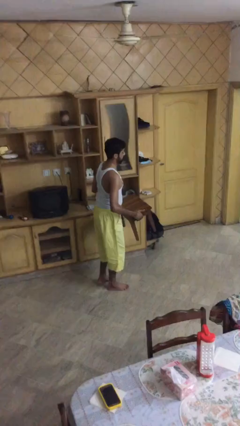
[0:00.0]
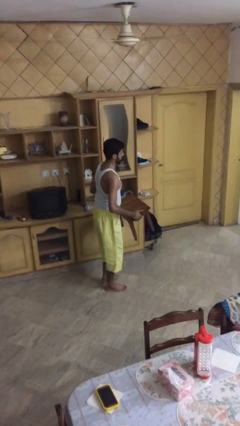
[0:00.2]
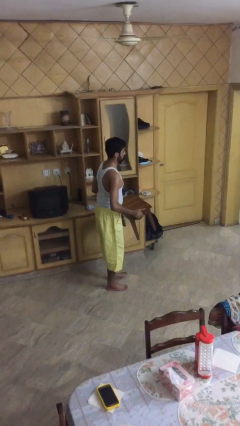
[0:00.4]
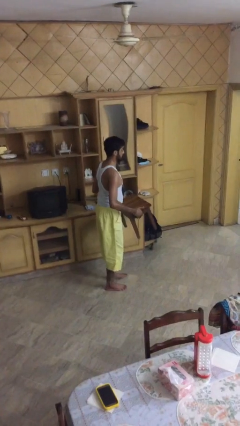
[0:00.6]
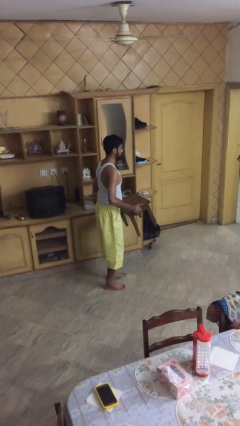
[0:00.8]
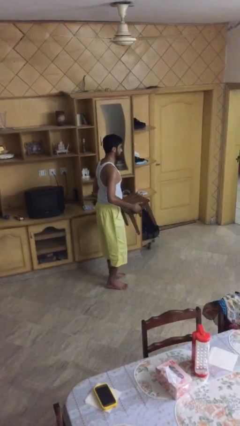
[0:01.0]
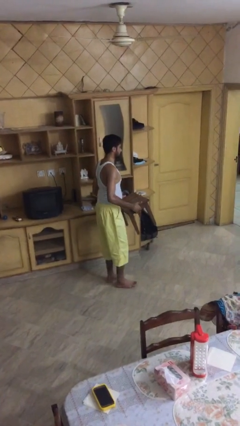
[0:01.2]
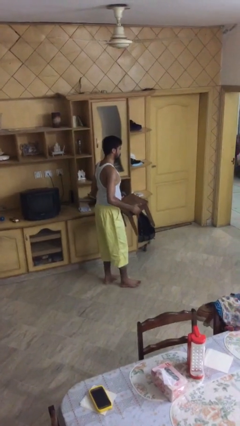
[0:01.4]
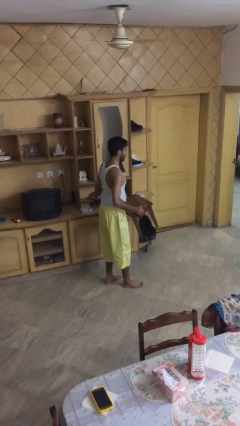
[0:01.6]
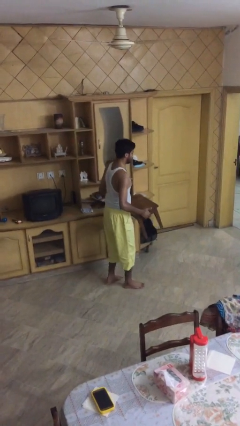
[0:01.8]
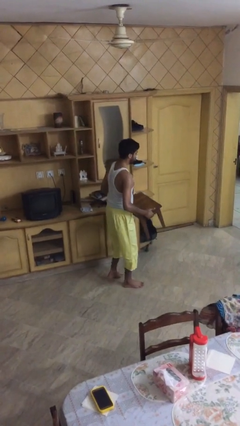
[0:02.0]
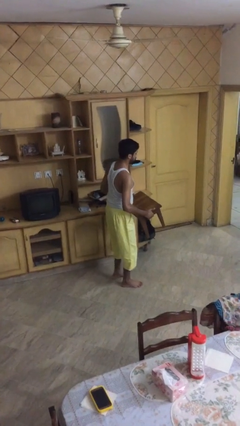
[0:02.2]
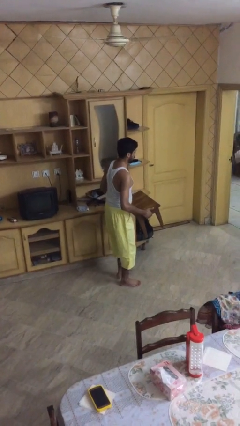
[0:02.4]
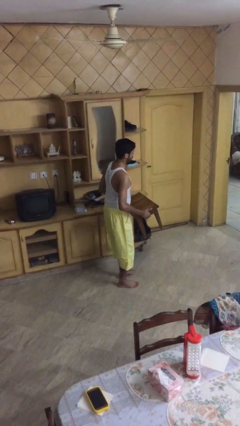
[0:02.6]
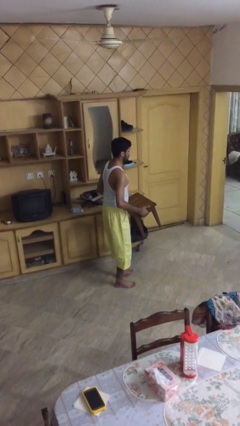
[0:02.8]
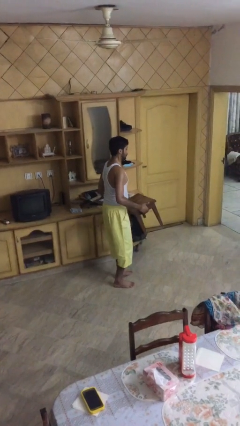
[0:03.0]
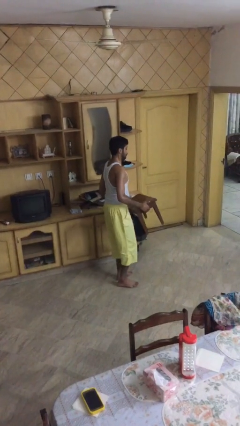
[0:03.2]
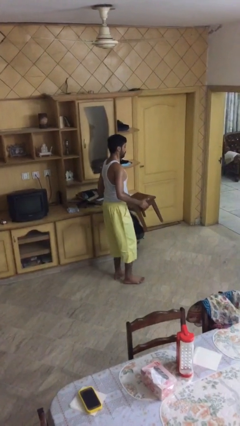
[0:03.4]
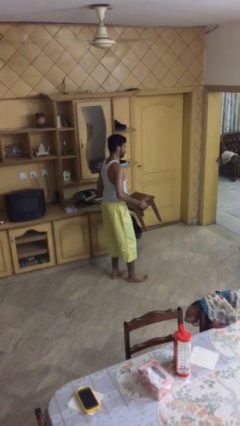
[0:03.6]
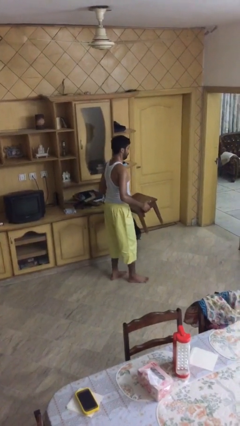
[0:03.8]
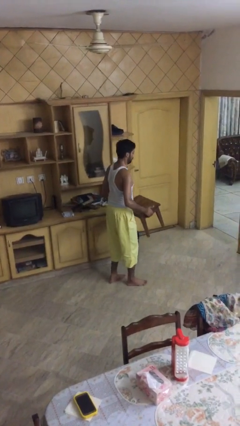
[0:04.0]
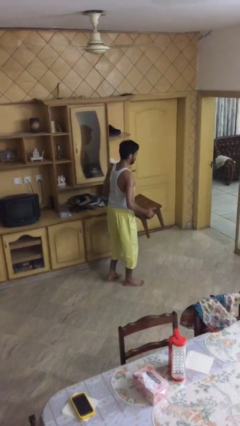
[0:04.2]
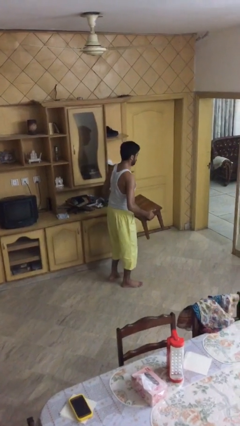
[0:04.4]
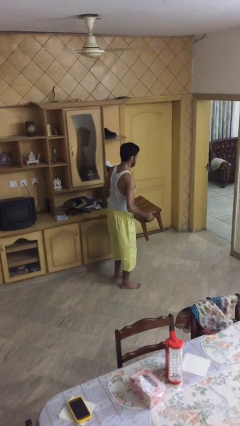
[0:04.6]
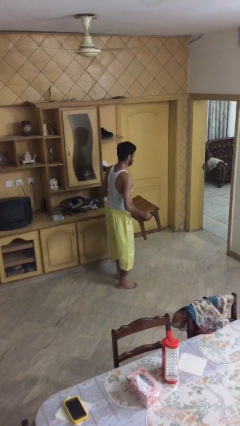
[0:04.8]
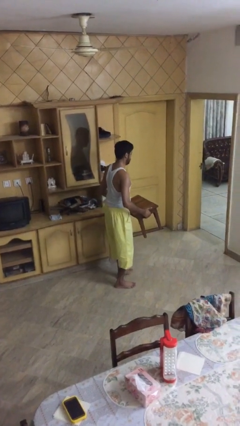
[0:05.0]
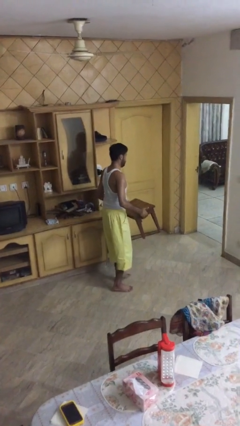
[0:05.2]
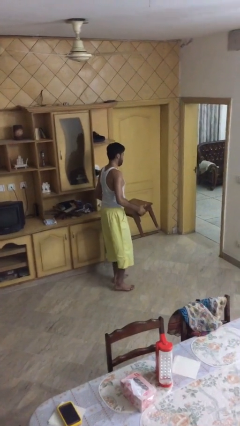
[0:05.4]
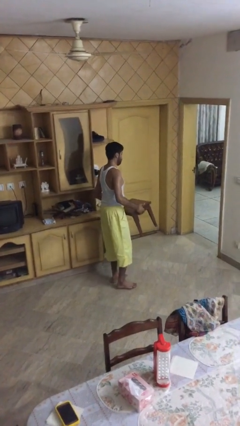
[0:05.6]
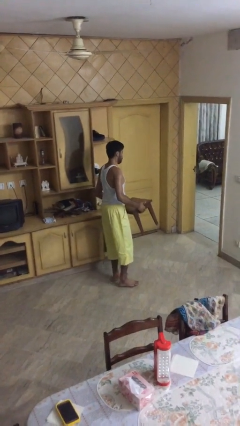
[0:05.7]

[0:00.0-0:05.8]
person carries heavy object

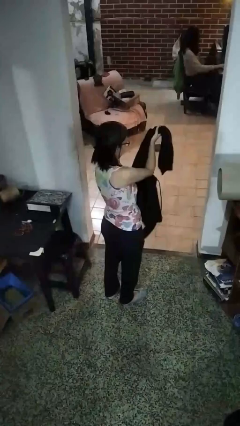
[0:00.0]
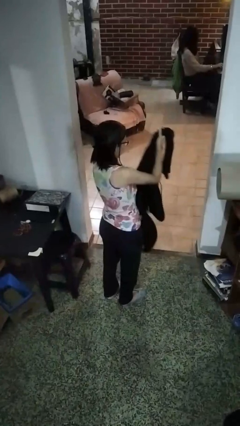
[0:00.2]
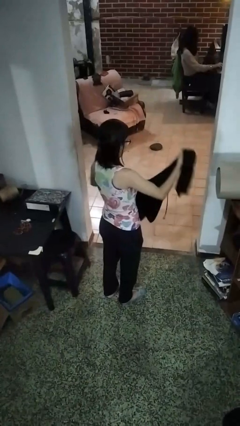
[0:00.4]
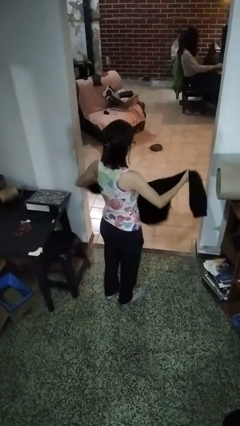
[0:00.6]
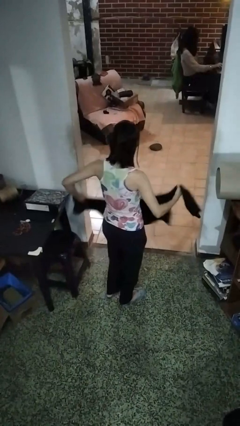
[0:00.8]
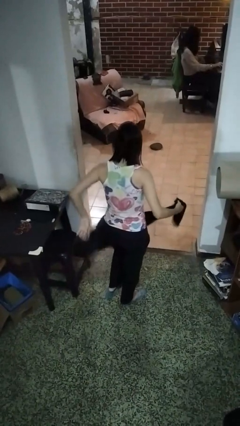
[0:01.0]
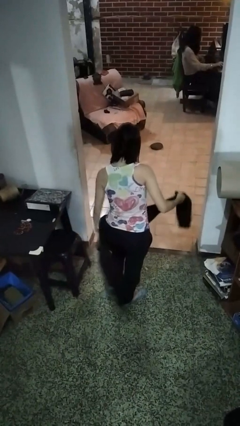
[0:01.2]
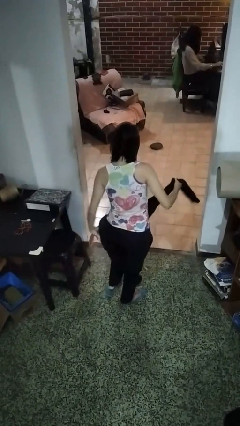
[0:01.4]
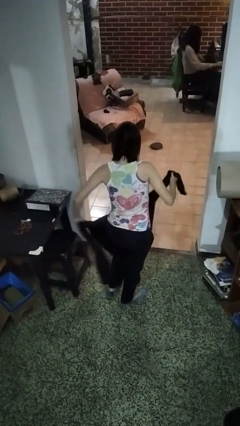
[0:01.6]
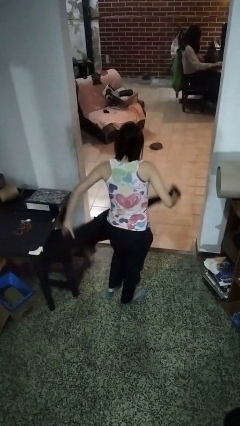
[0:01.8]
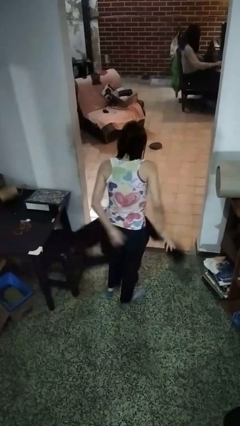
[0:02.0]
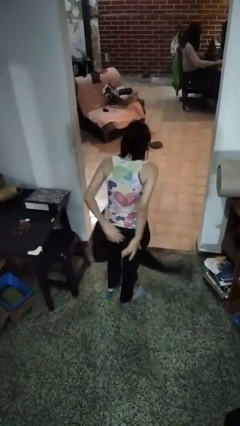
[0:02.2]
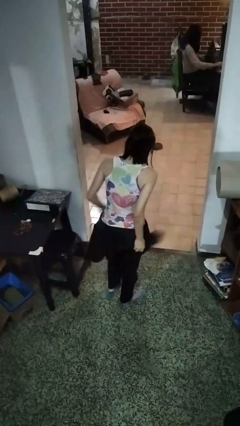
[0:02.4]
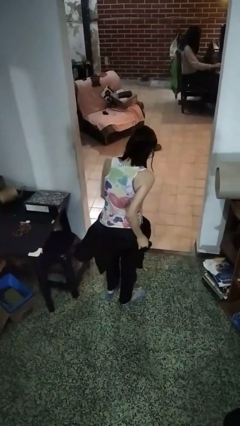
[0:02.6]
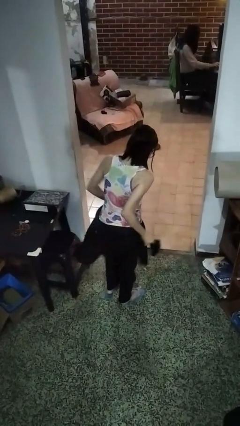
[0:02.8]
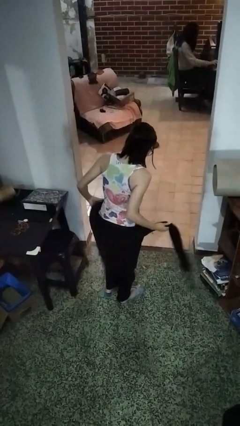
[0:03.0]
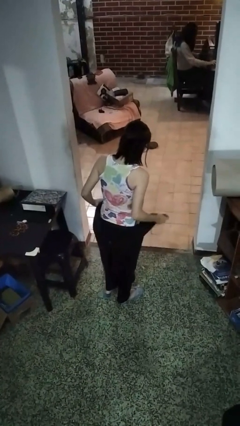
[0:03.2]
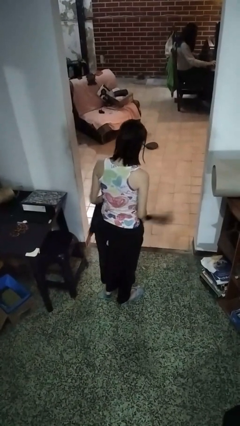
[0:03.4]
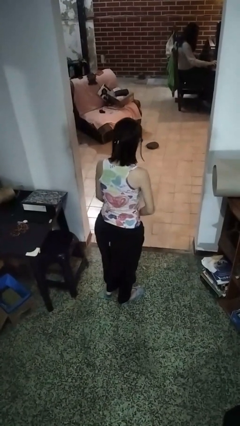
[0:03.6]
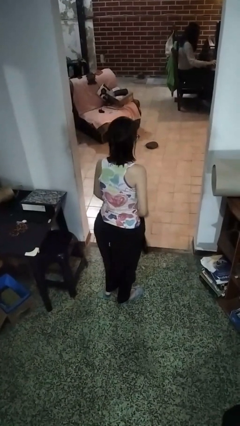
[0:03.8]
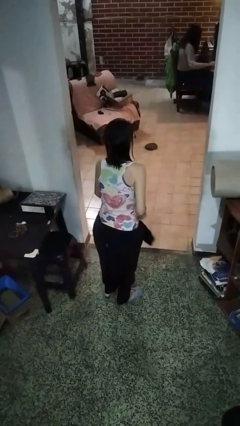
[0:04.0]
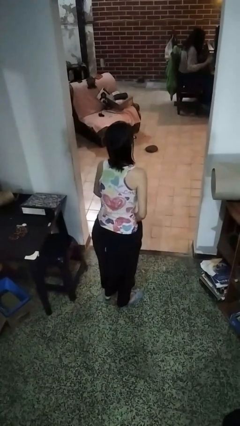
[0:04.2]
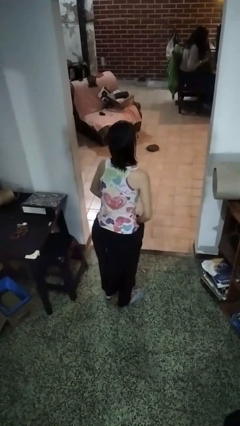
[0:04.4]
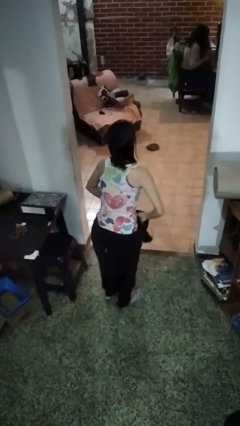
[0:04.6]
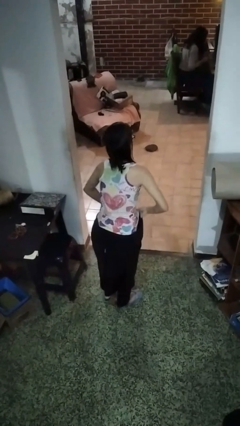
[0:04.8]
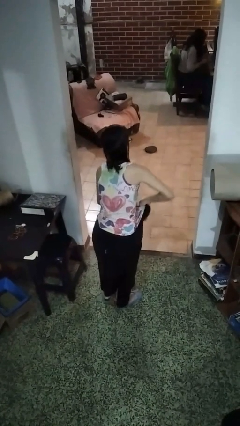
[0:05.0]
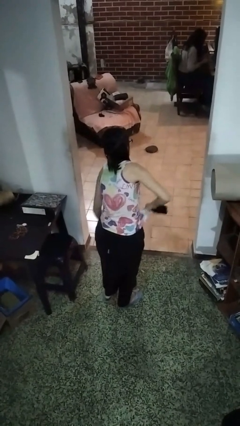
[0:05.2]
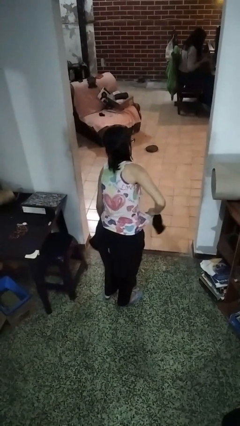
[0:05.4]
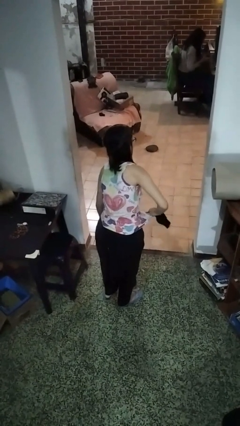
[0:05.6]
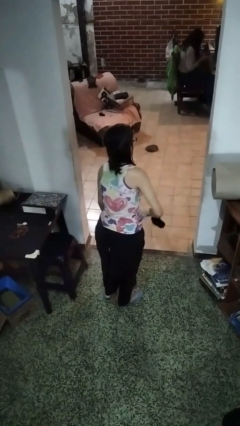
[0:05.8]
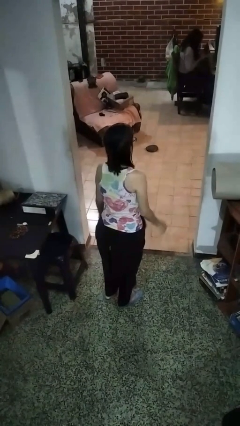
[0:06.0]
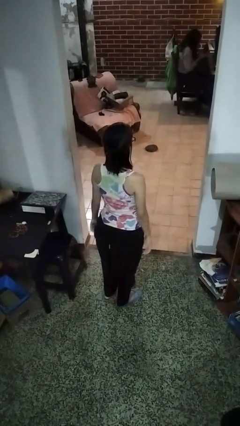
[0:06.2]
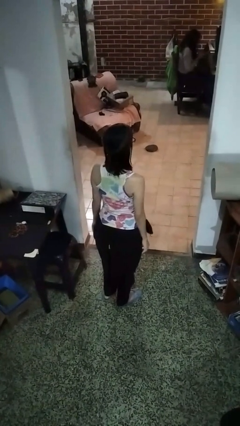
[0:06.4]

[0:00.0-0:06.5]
person ties jacket around waist

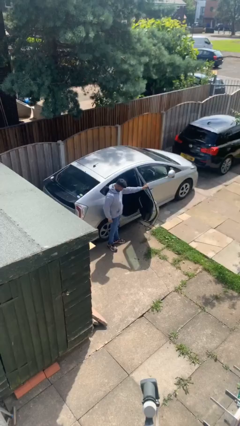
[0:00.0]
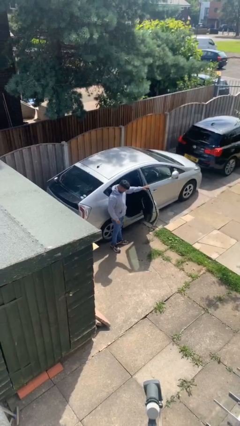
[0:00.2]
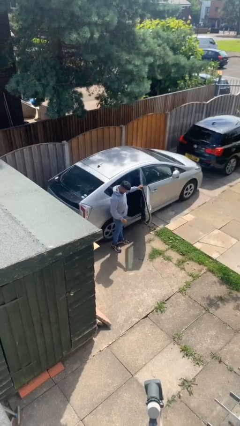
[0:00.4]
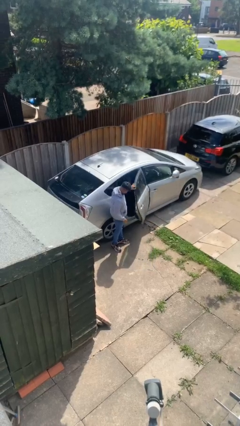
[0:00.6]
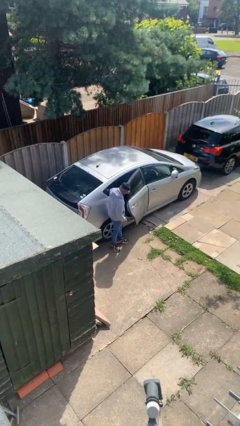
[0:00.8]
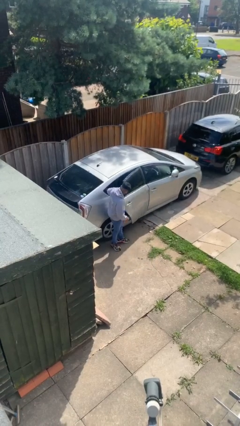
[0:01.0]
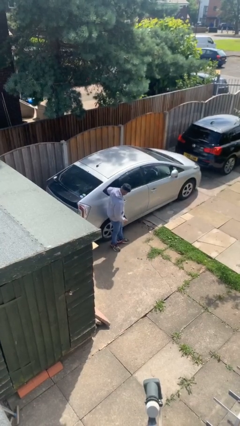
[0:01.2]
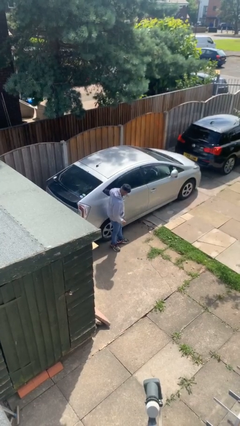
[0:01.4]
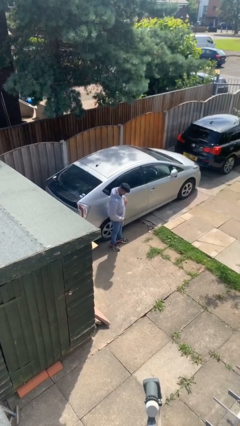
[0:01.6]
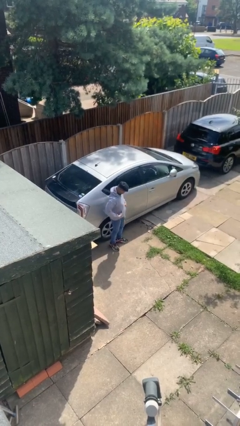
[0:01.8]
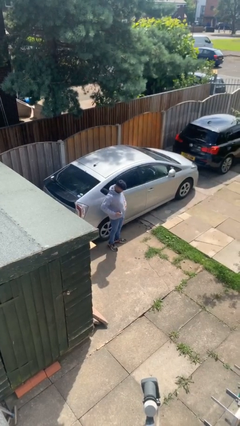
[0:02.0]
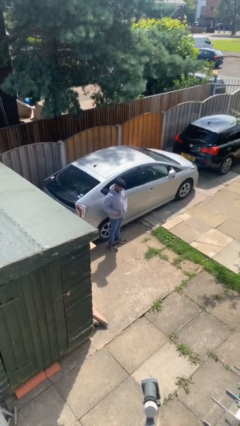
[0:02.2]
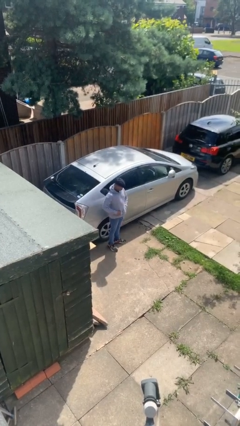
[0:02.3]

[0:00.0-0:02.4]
person closes car door

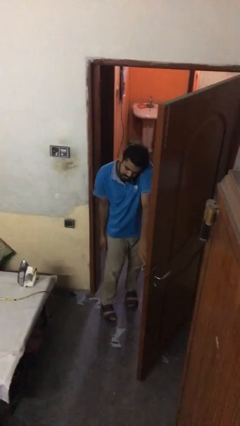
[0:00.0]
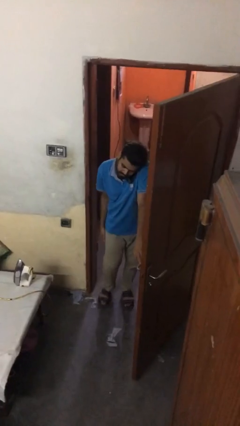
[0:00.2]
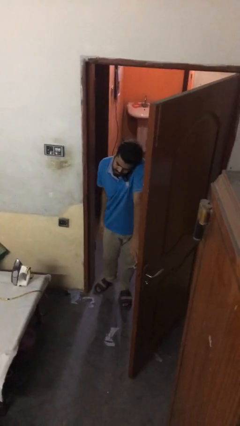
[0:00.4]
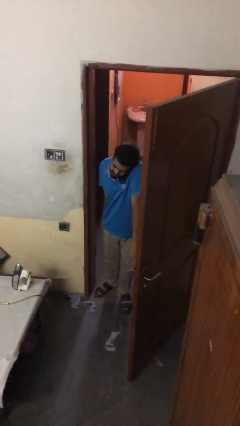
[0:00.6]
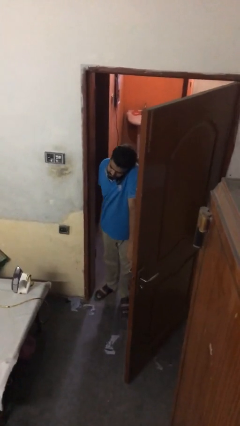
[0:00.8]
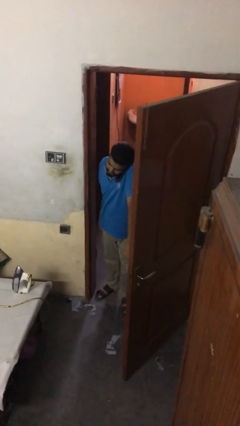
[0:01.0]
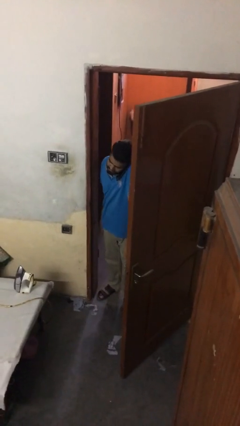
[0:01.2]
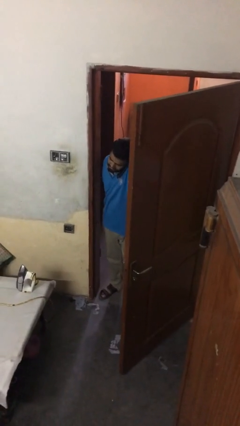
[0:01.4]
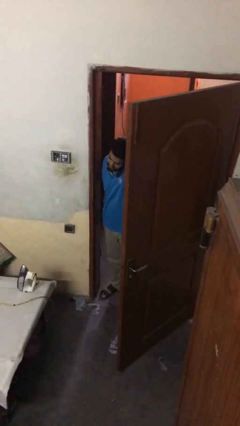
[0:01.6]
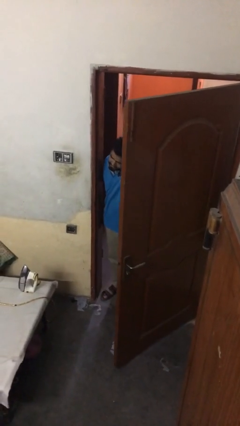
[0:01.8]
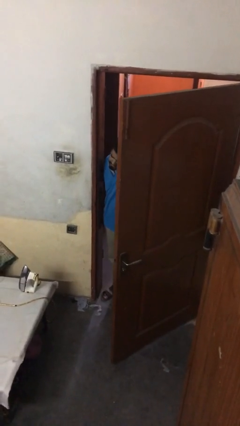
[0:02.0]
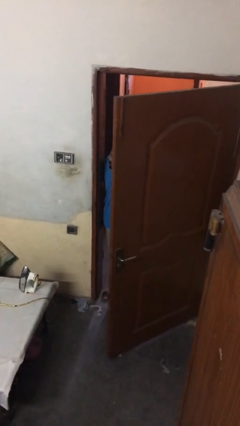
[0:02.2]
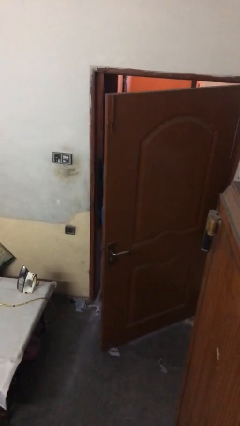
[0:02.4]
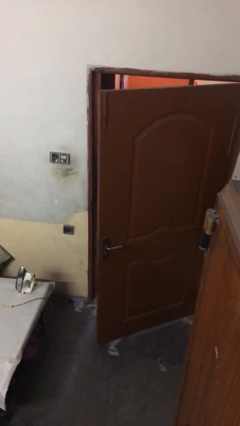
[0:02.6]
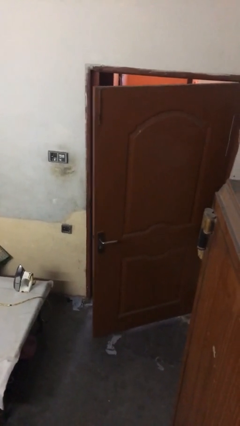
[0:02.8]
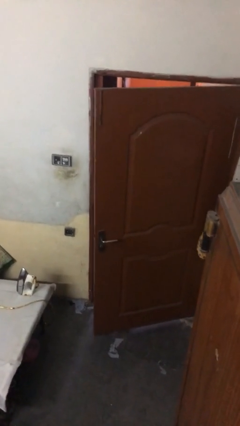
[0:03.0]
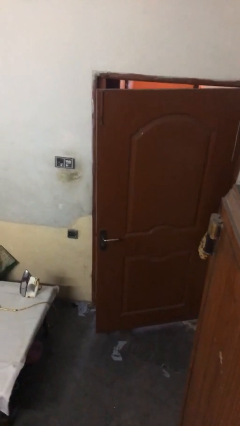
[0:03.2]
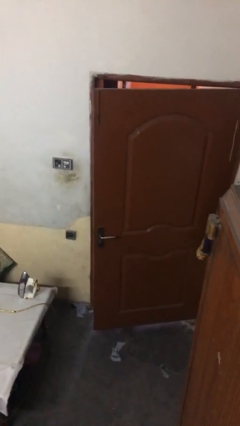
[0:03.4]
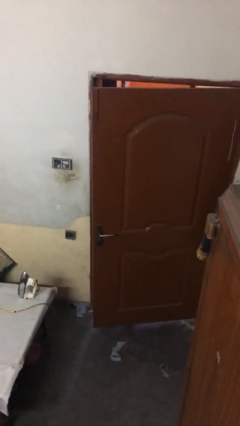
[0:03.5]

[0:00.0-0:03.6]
person closes facility door
